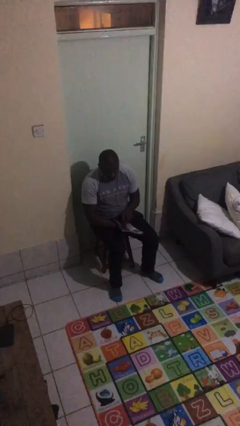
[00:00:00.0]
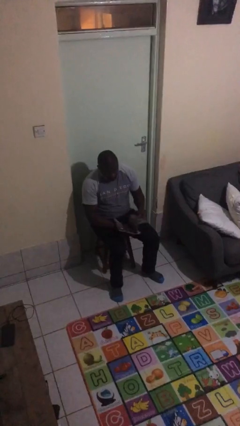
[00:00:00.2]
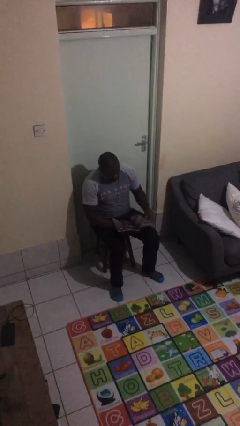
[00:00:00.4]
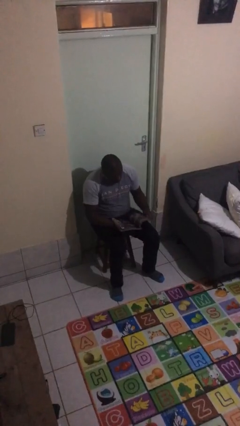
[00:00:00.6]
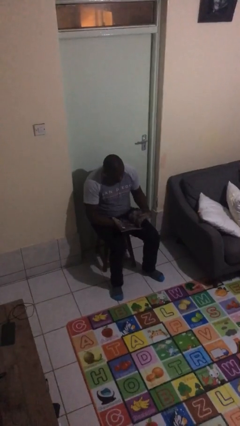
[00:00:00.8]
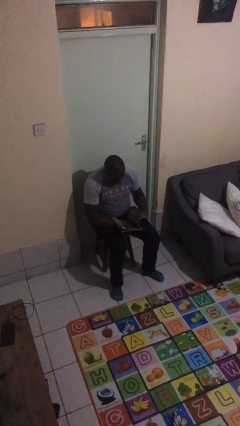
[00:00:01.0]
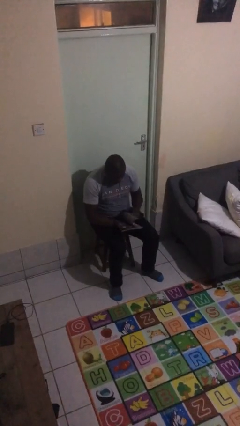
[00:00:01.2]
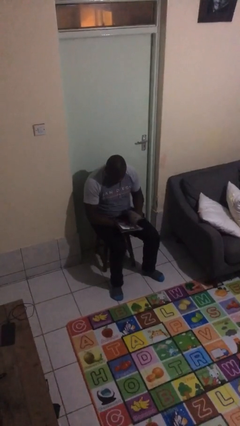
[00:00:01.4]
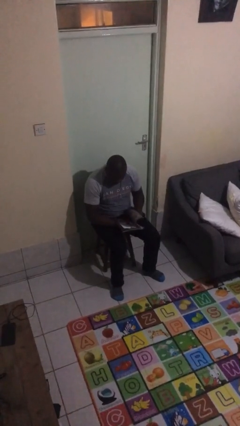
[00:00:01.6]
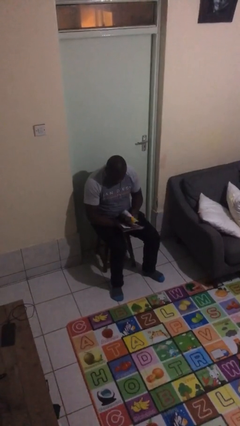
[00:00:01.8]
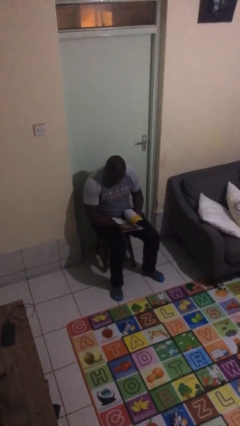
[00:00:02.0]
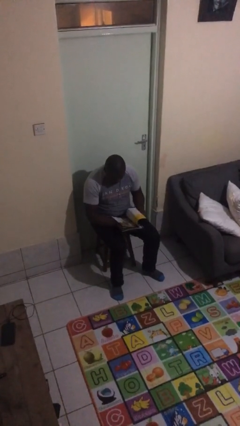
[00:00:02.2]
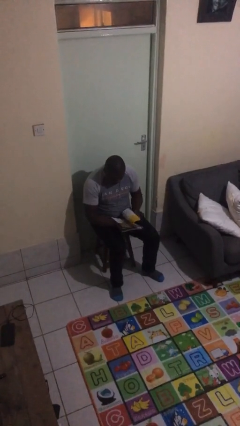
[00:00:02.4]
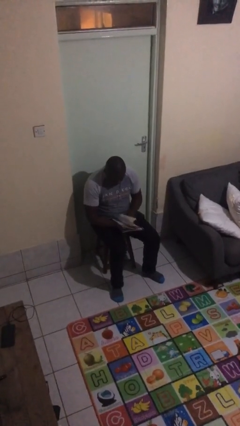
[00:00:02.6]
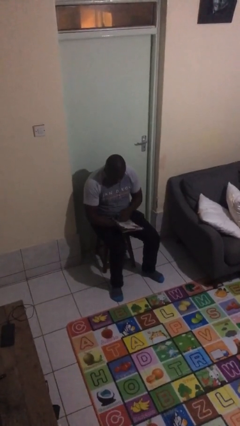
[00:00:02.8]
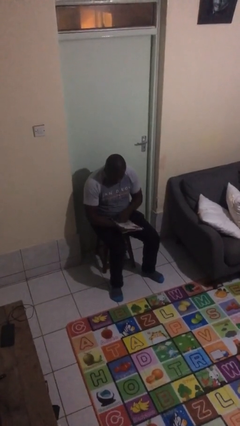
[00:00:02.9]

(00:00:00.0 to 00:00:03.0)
person reads magazine

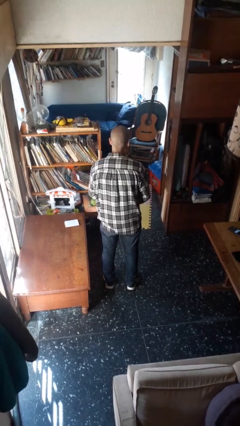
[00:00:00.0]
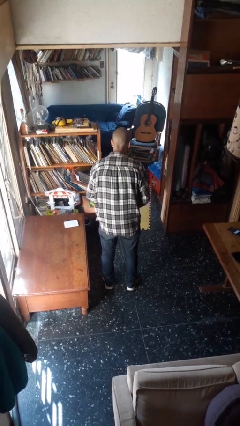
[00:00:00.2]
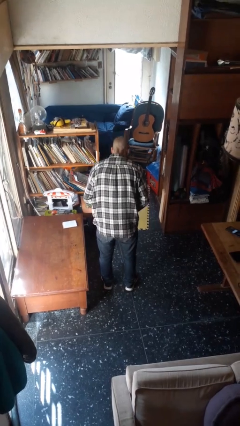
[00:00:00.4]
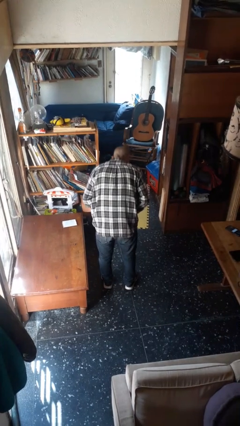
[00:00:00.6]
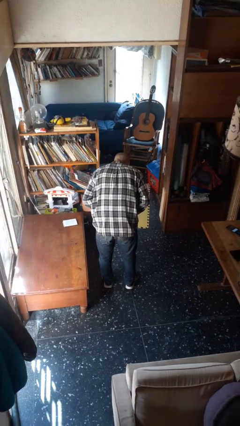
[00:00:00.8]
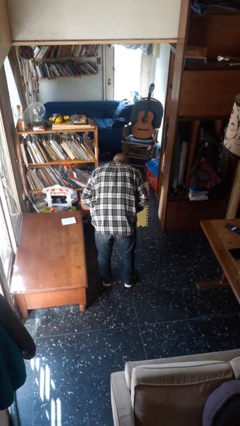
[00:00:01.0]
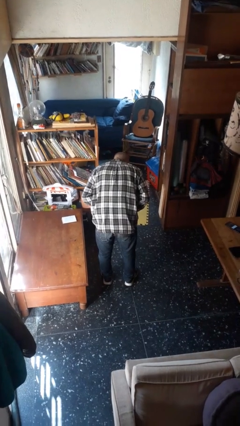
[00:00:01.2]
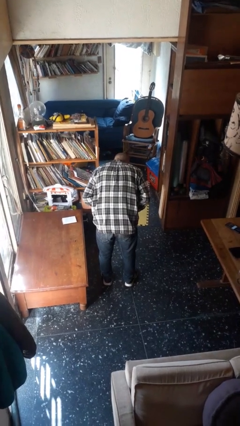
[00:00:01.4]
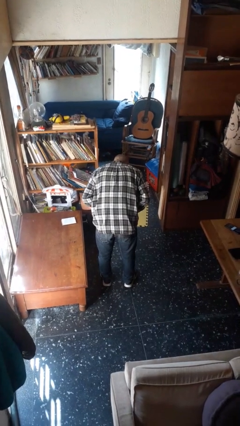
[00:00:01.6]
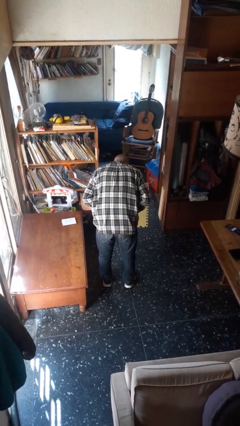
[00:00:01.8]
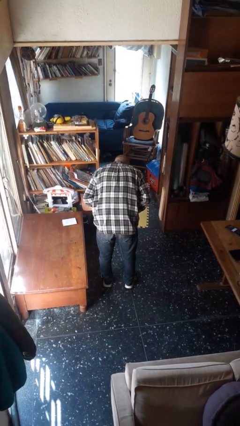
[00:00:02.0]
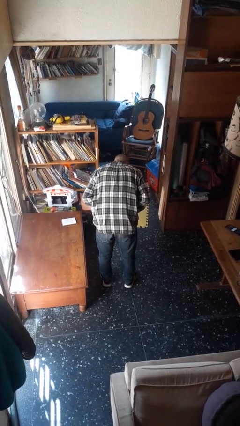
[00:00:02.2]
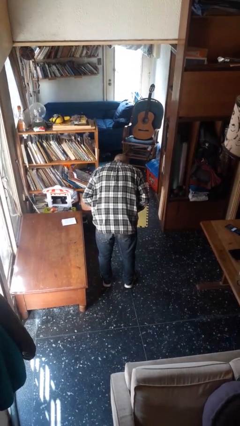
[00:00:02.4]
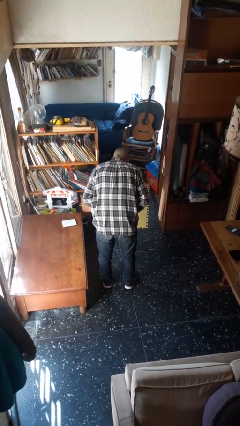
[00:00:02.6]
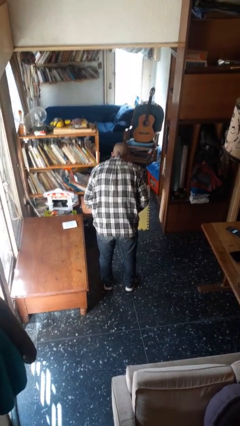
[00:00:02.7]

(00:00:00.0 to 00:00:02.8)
person bows

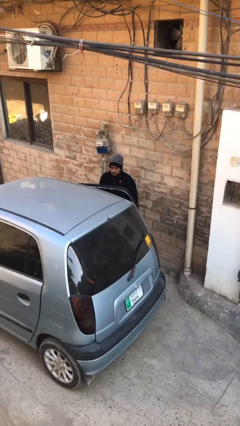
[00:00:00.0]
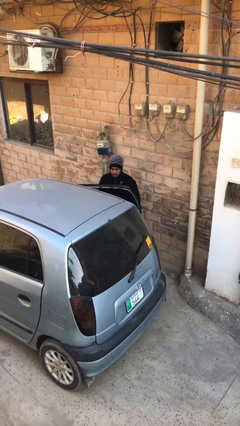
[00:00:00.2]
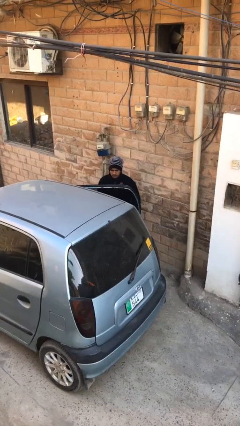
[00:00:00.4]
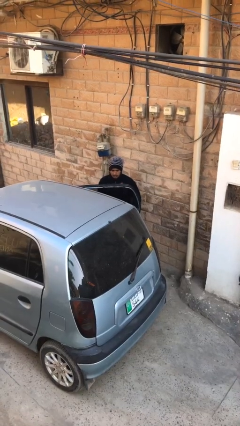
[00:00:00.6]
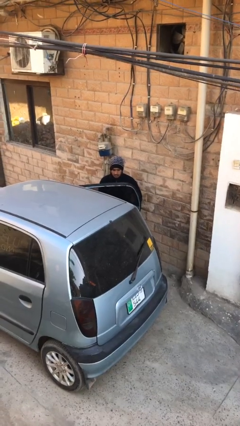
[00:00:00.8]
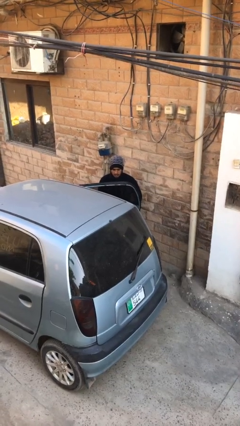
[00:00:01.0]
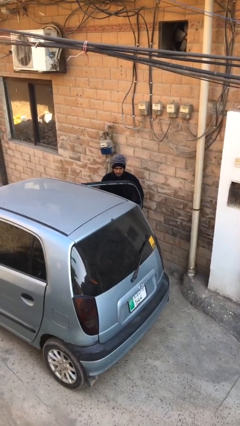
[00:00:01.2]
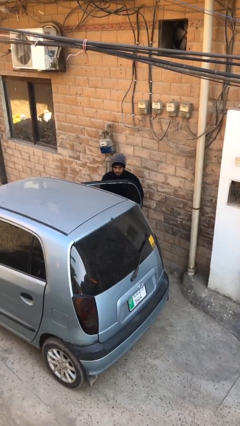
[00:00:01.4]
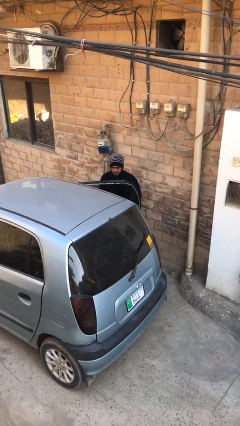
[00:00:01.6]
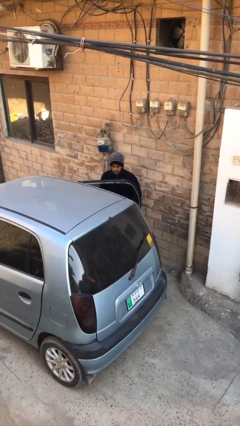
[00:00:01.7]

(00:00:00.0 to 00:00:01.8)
person opens car door

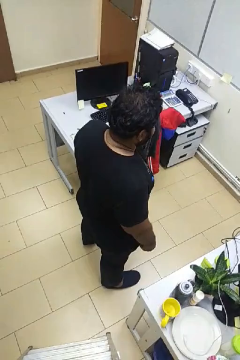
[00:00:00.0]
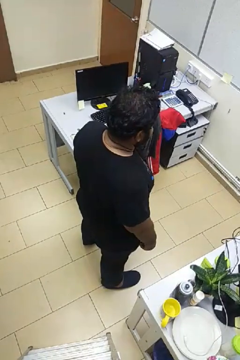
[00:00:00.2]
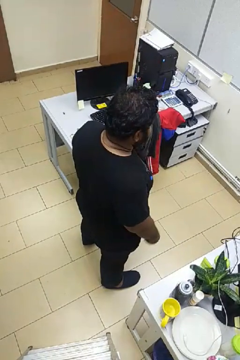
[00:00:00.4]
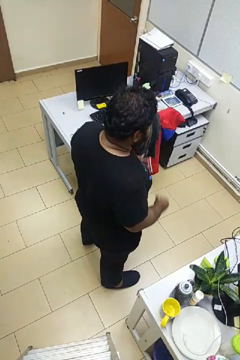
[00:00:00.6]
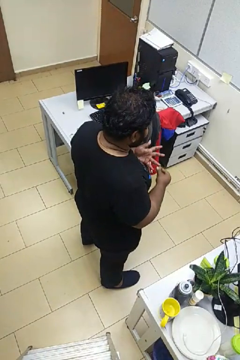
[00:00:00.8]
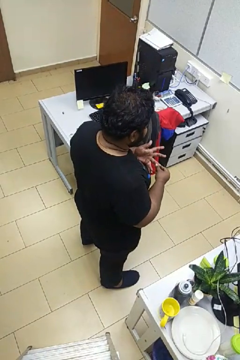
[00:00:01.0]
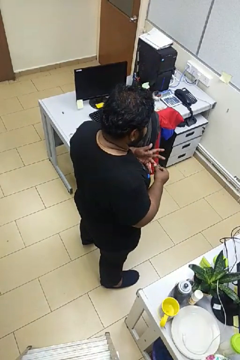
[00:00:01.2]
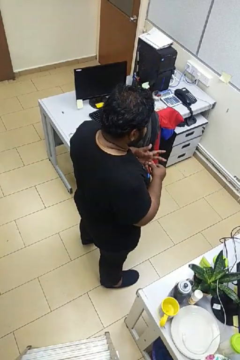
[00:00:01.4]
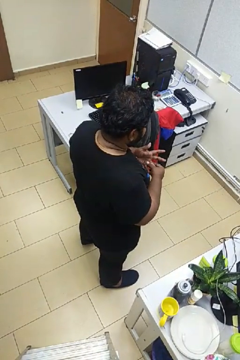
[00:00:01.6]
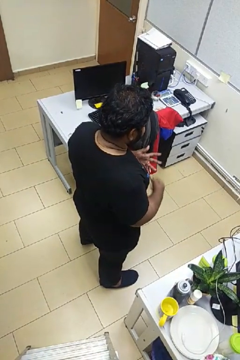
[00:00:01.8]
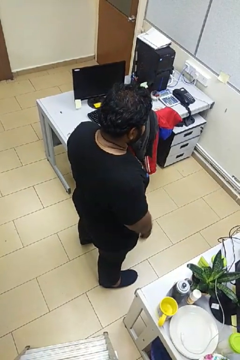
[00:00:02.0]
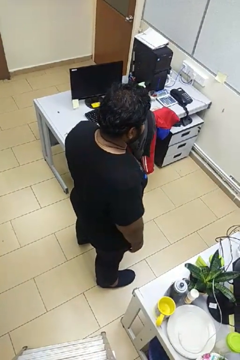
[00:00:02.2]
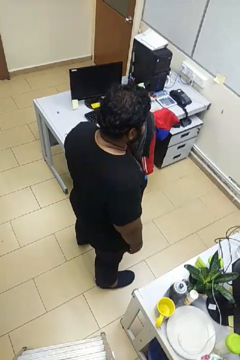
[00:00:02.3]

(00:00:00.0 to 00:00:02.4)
person puts on ring

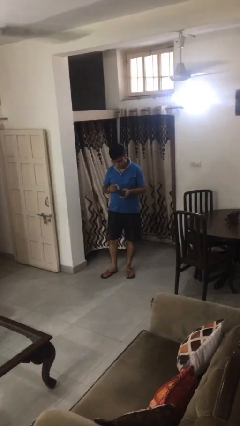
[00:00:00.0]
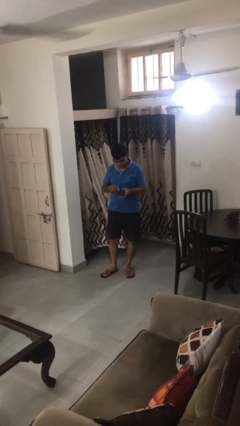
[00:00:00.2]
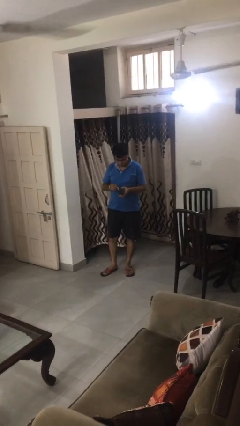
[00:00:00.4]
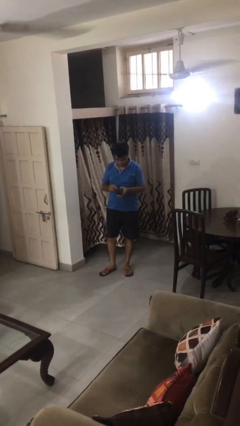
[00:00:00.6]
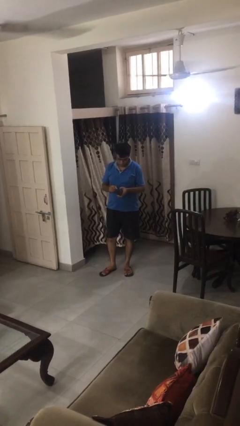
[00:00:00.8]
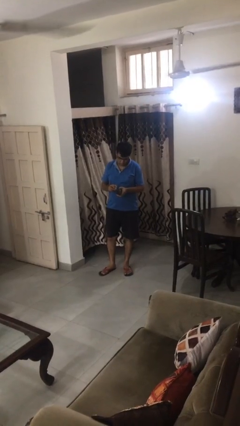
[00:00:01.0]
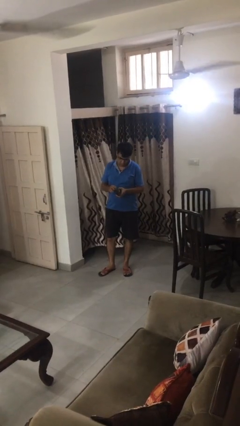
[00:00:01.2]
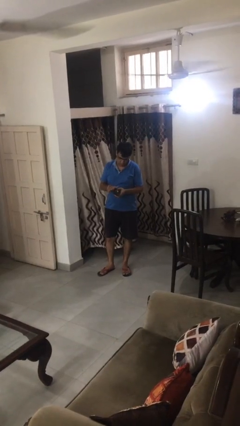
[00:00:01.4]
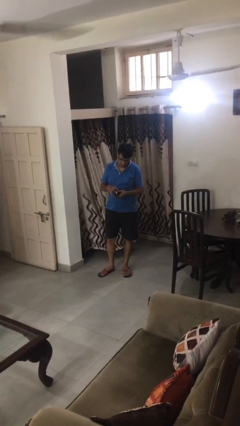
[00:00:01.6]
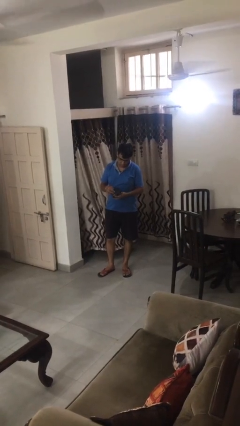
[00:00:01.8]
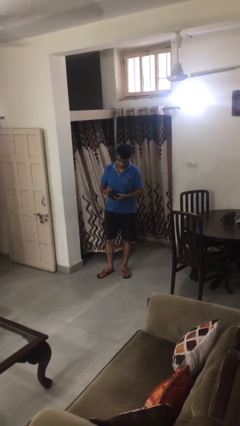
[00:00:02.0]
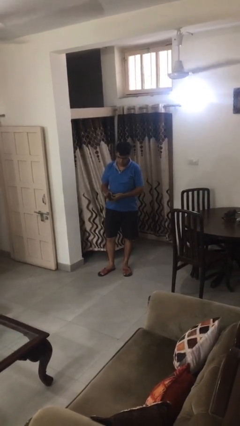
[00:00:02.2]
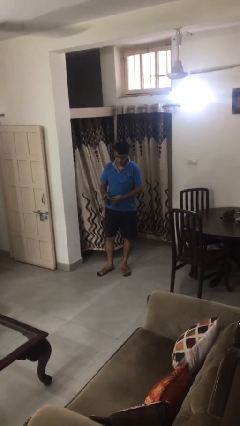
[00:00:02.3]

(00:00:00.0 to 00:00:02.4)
person puts object into purse

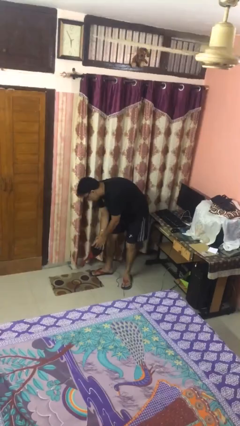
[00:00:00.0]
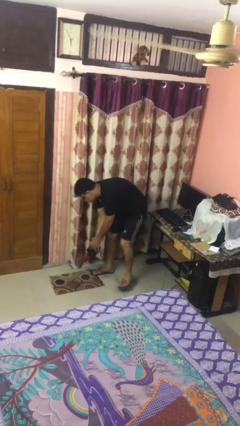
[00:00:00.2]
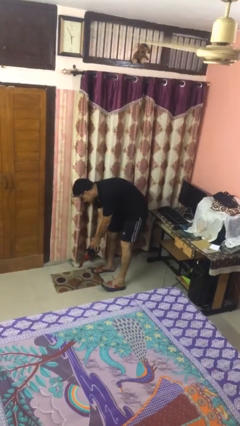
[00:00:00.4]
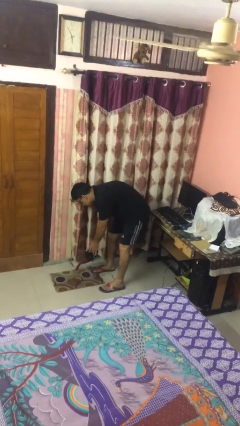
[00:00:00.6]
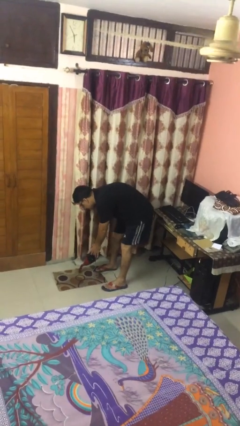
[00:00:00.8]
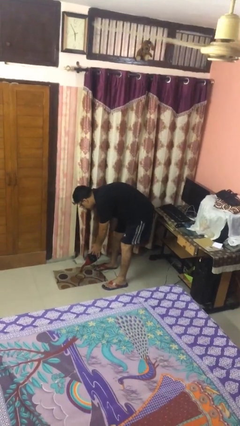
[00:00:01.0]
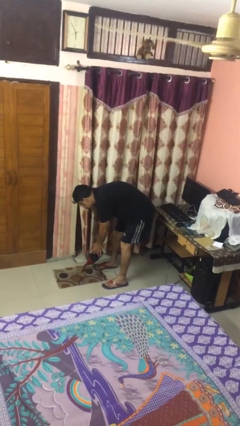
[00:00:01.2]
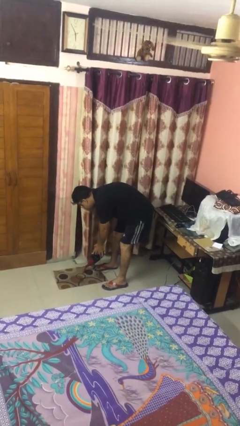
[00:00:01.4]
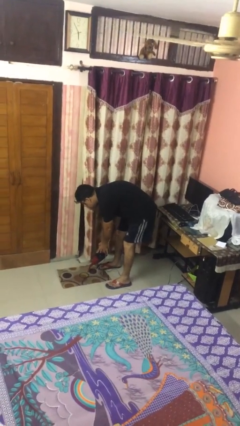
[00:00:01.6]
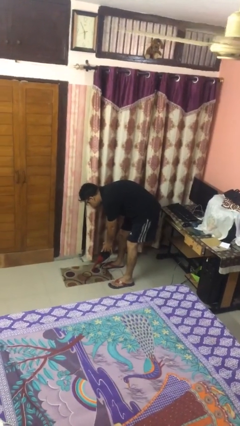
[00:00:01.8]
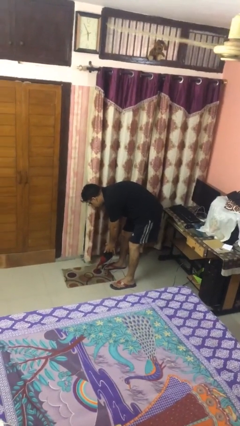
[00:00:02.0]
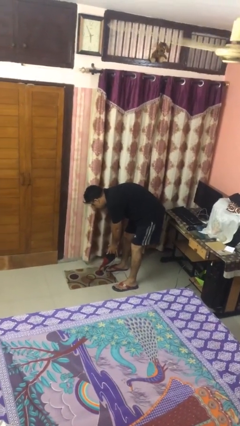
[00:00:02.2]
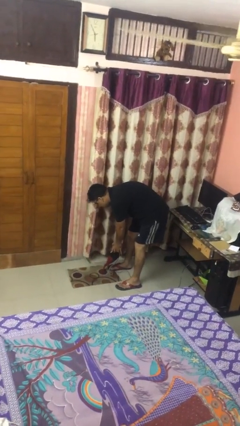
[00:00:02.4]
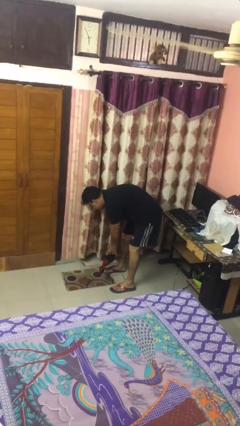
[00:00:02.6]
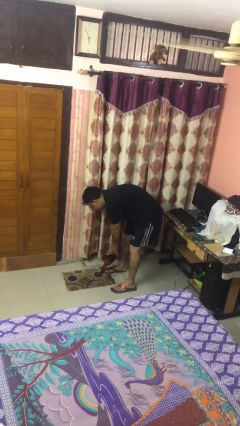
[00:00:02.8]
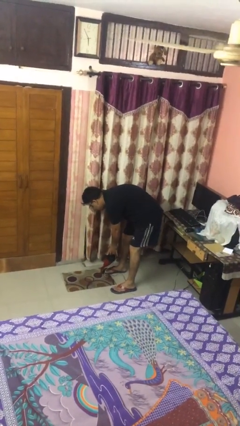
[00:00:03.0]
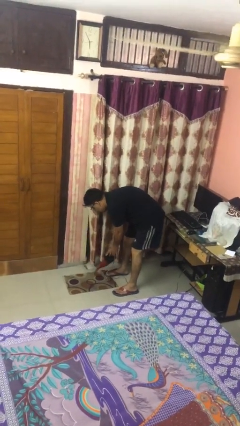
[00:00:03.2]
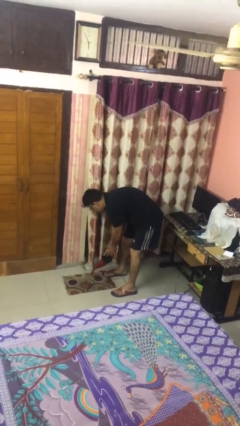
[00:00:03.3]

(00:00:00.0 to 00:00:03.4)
person vacuums carpet

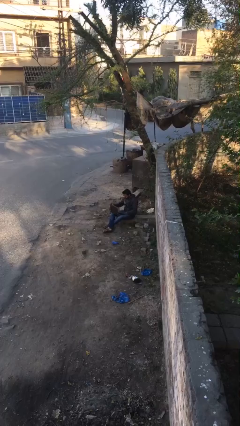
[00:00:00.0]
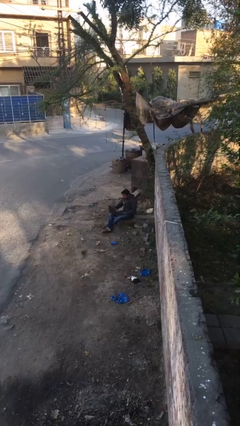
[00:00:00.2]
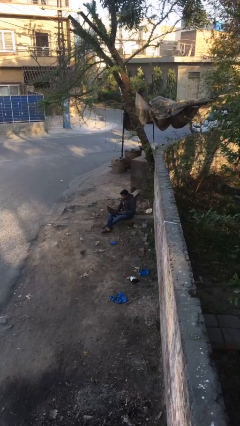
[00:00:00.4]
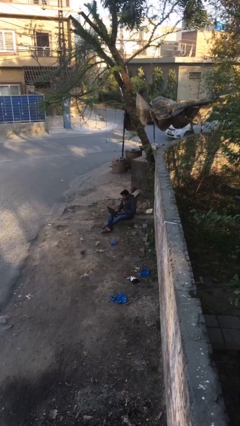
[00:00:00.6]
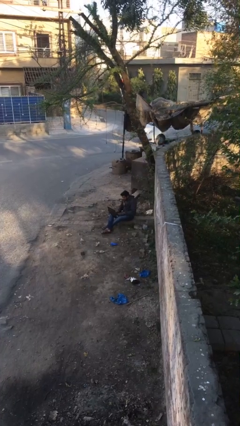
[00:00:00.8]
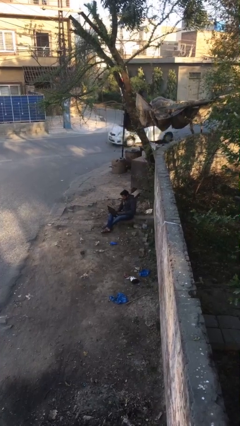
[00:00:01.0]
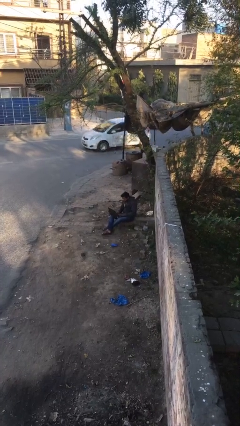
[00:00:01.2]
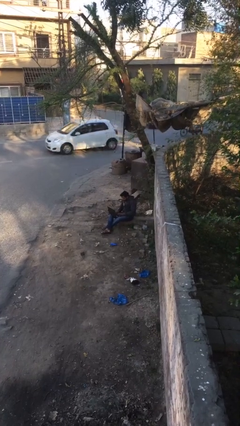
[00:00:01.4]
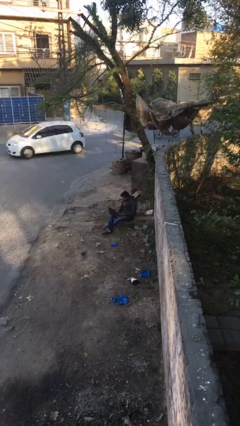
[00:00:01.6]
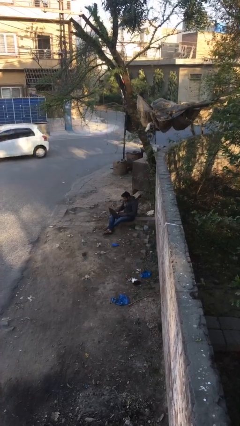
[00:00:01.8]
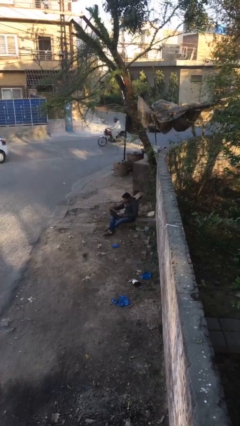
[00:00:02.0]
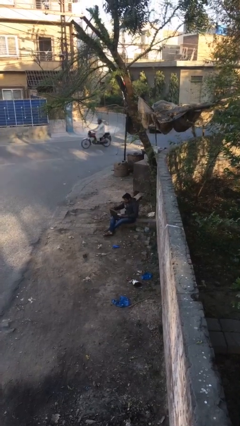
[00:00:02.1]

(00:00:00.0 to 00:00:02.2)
person interacts with laptop
